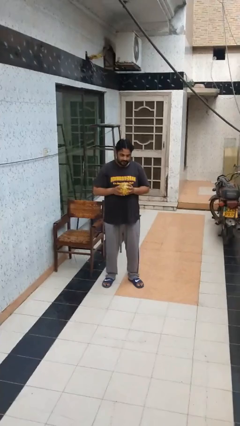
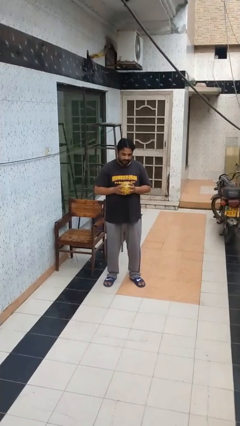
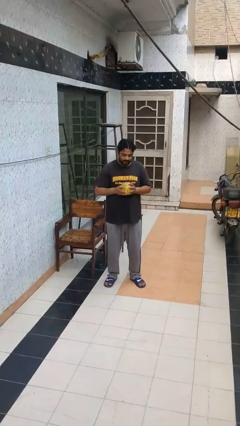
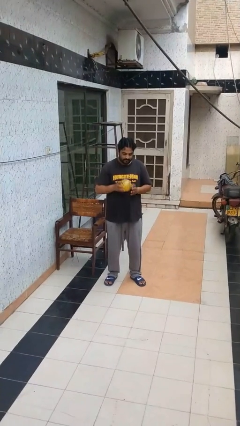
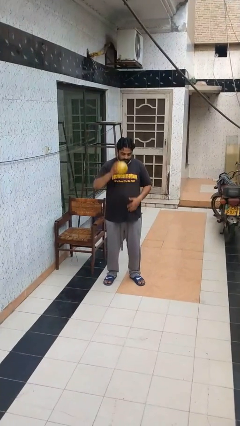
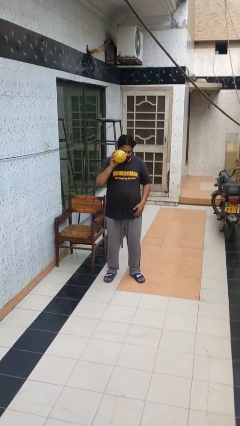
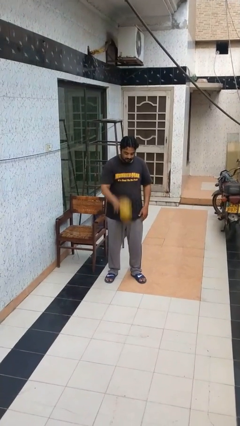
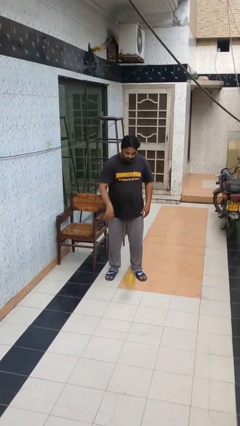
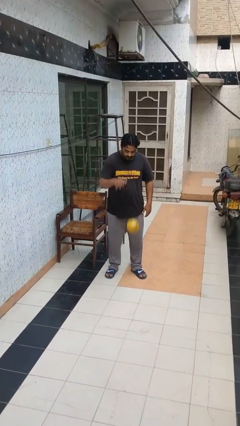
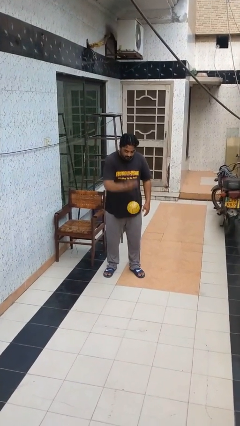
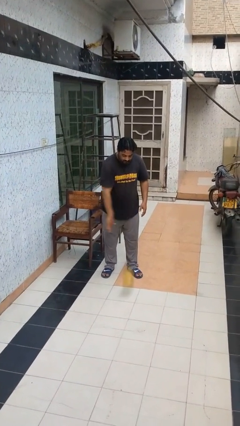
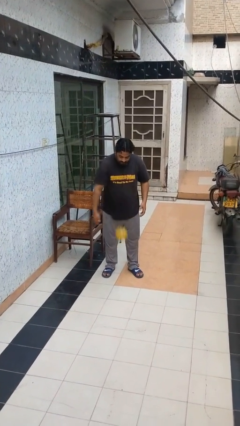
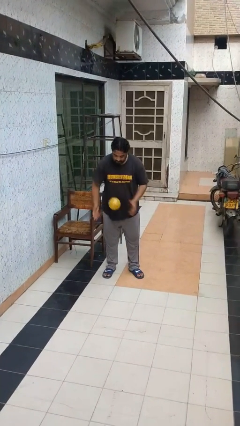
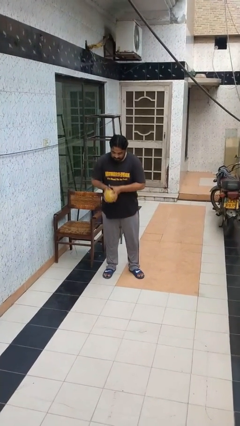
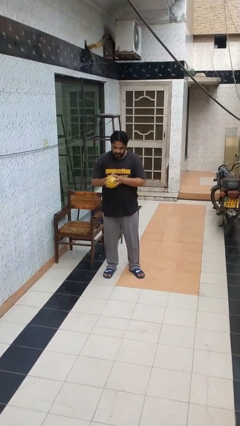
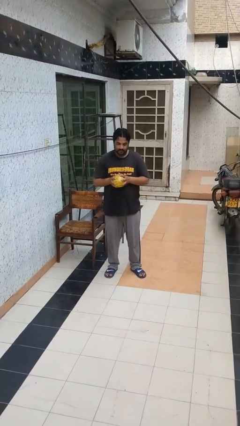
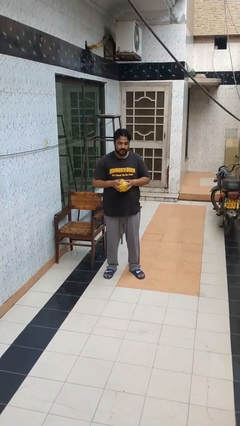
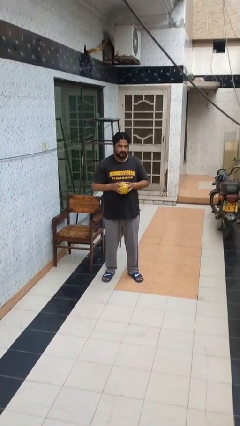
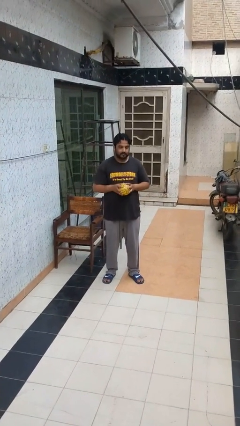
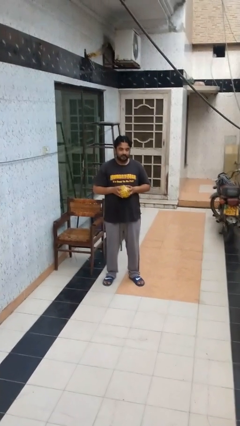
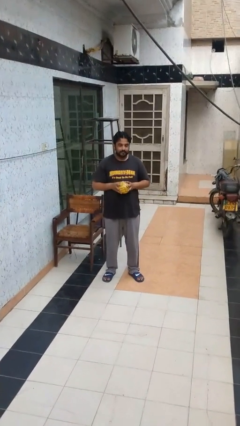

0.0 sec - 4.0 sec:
person bounces ball on floor

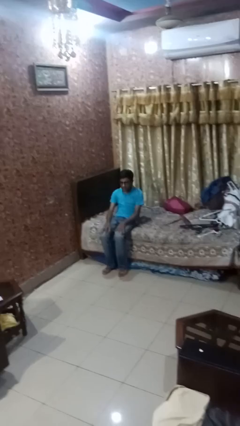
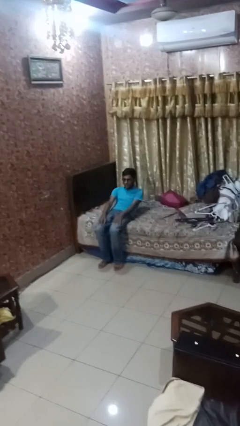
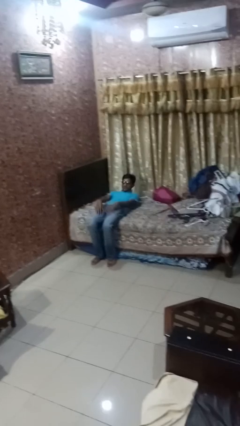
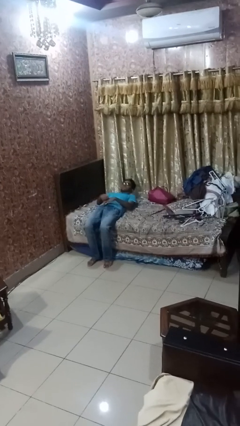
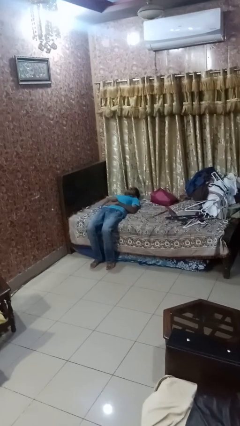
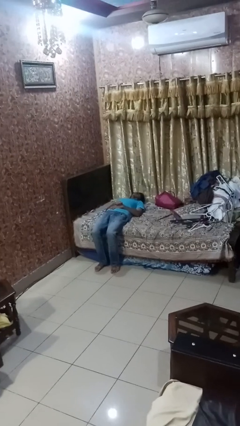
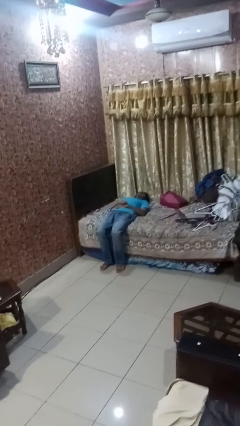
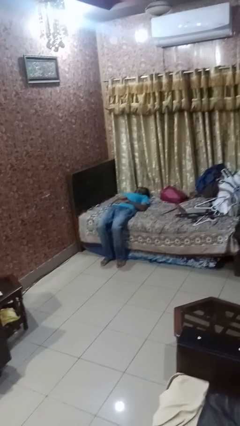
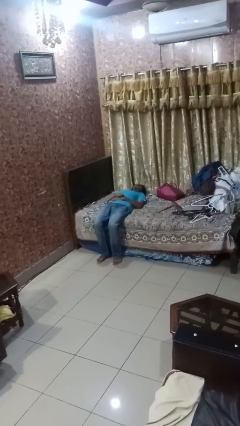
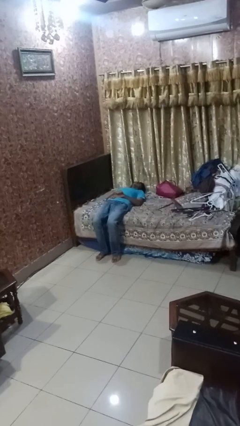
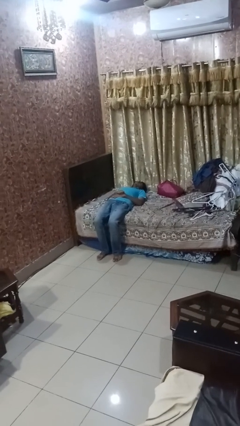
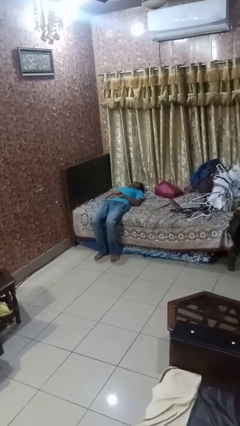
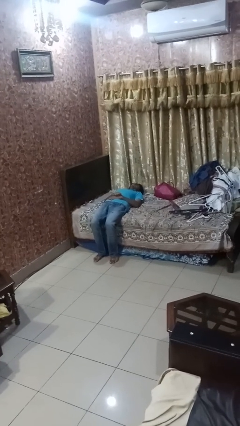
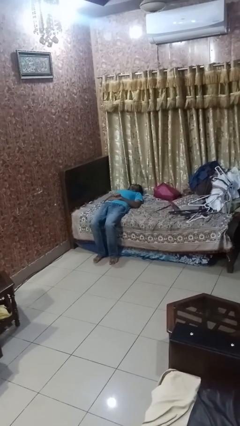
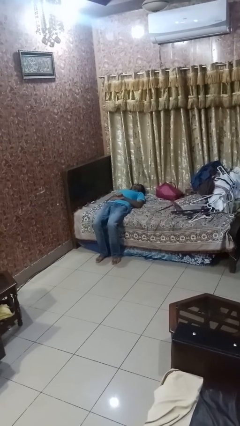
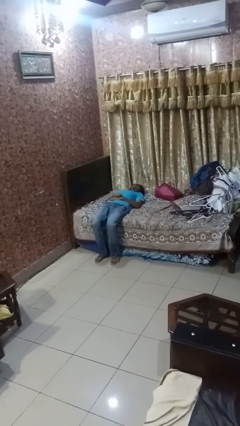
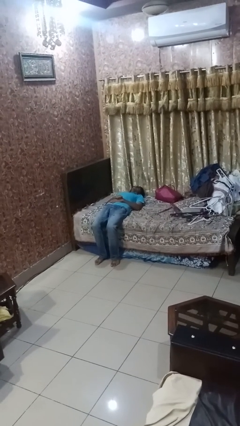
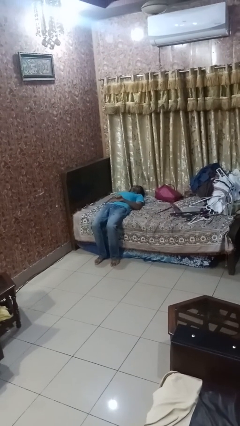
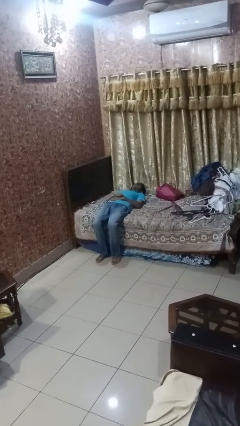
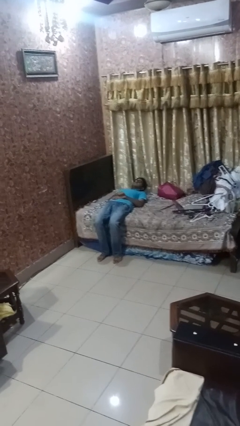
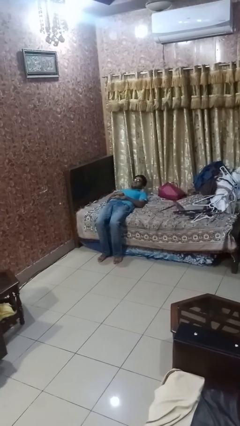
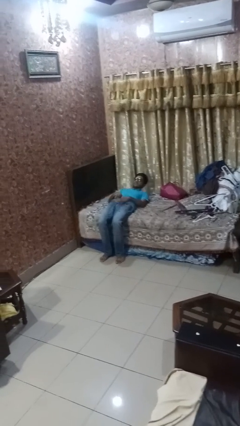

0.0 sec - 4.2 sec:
person lies down on bed

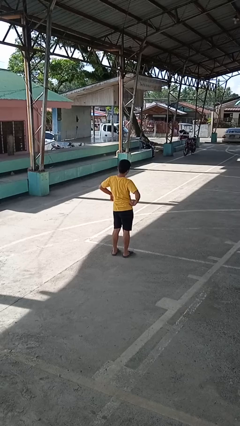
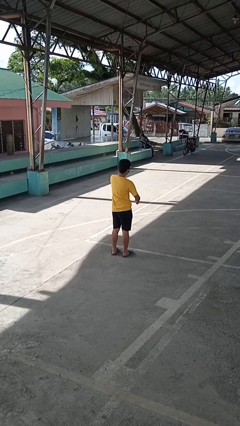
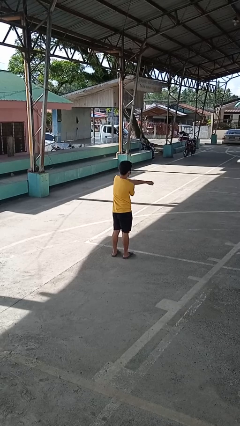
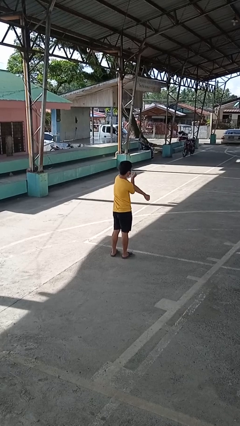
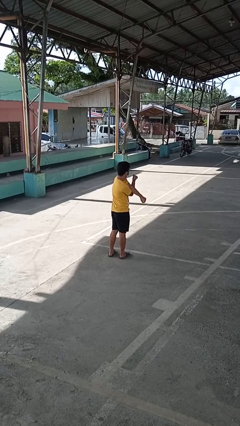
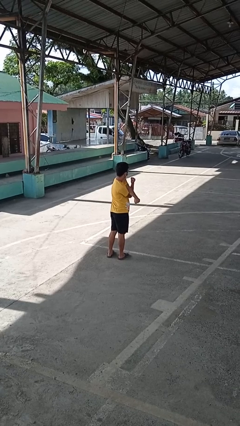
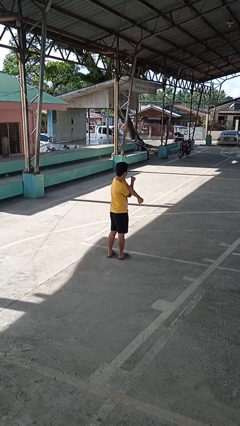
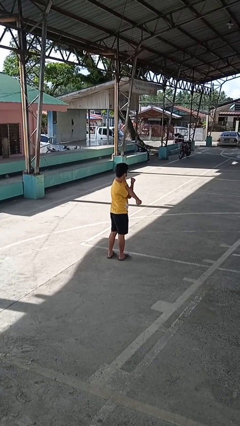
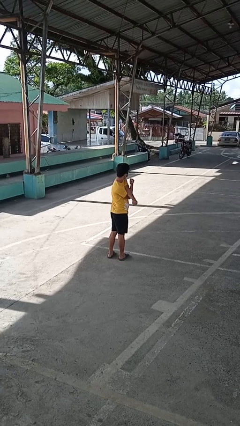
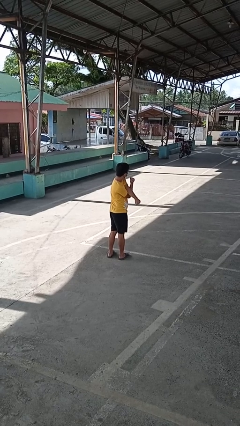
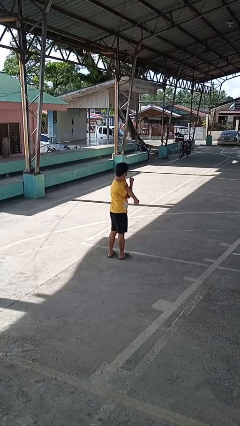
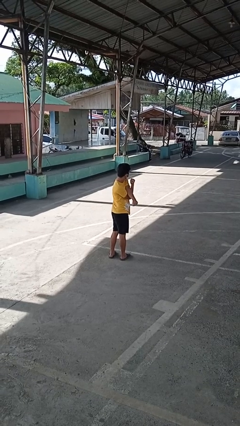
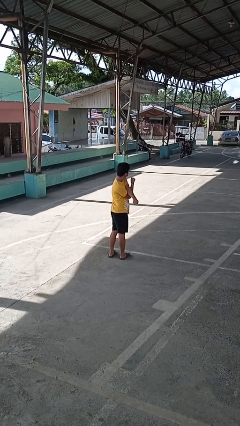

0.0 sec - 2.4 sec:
person stretches arms to side

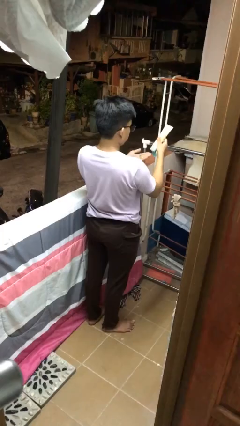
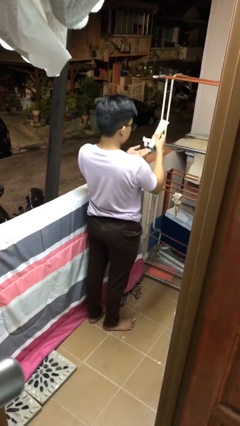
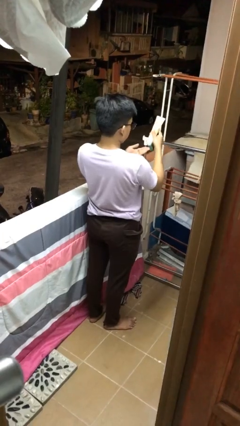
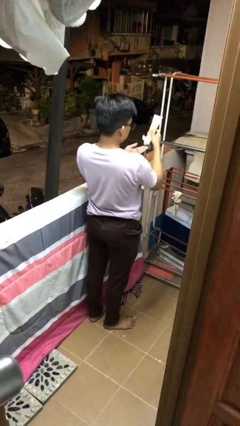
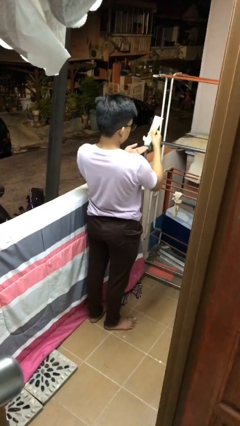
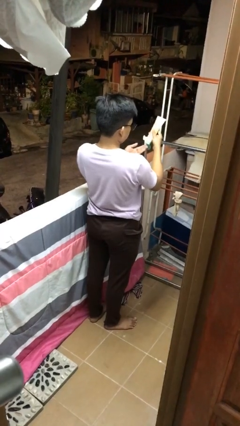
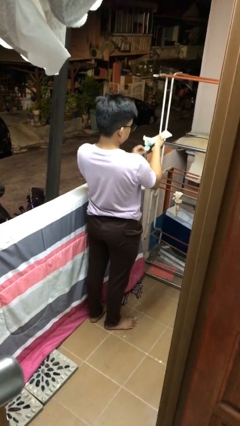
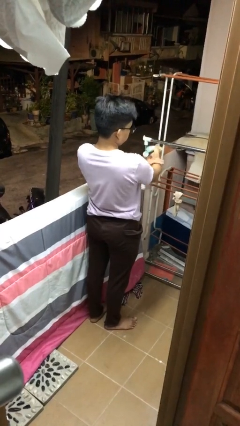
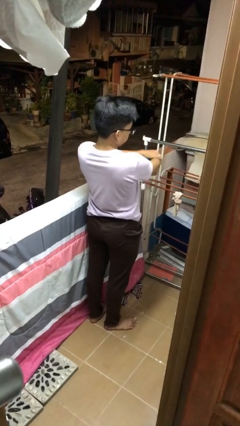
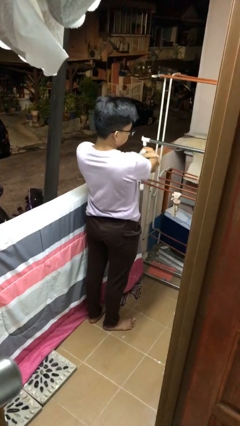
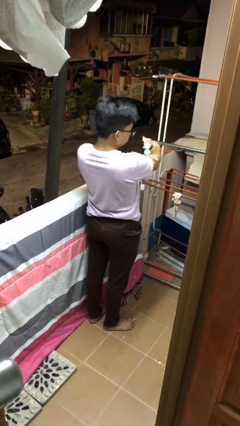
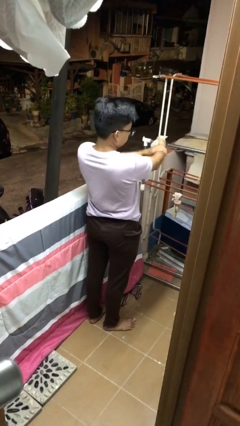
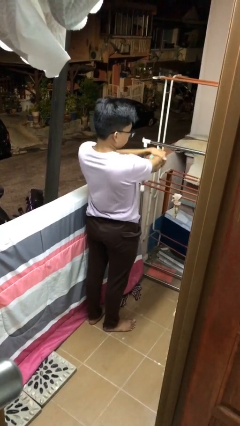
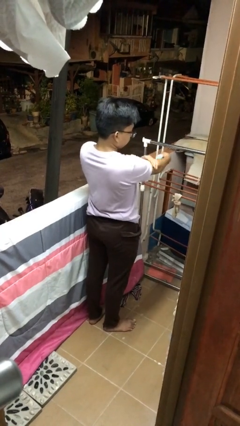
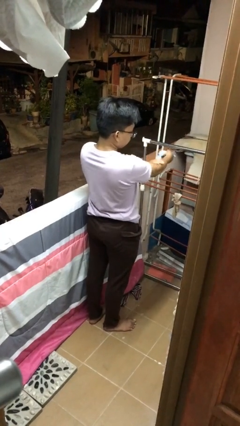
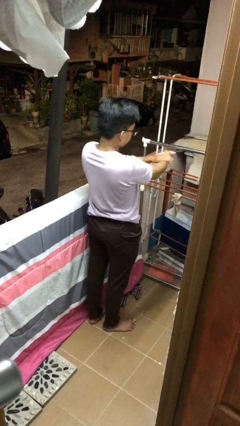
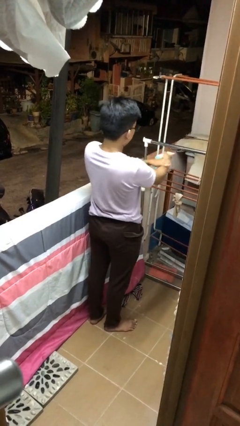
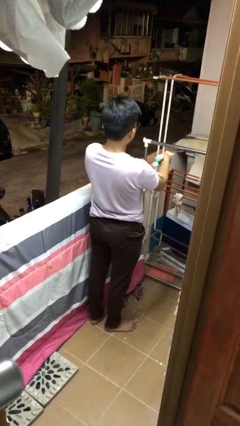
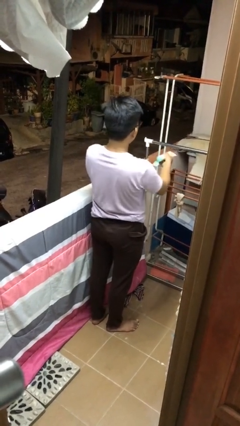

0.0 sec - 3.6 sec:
person applies sunscreen

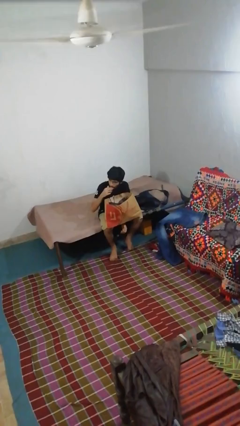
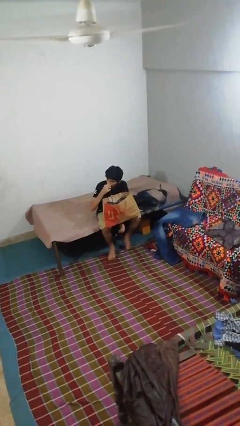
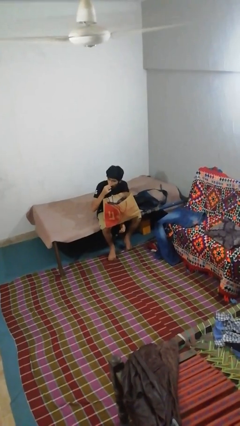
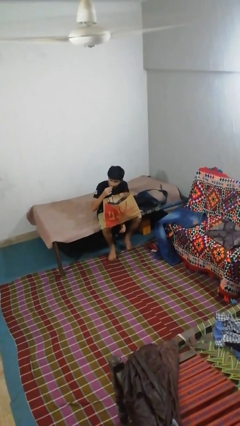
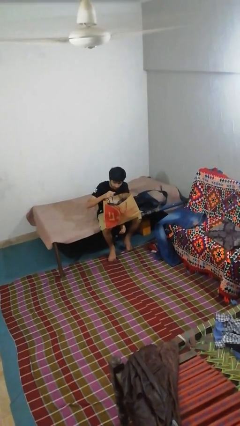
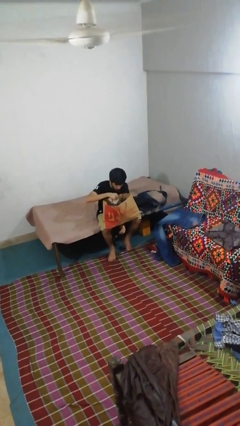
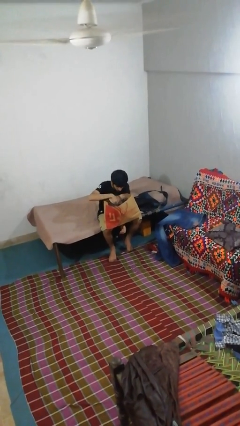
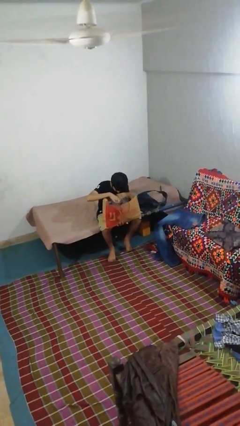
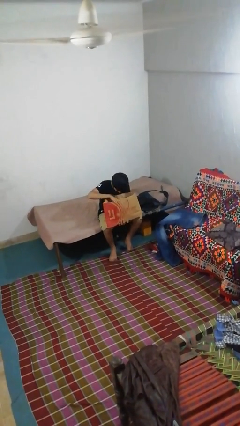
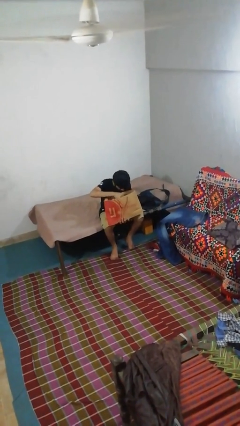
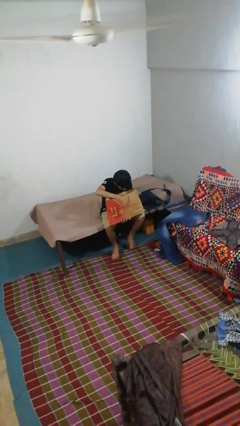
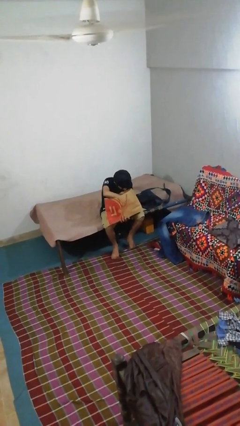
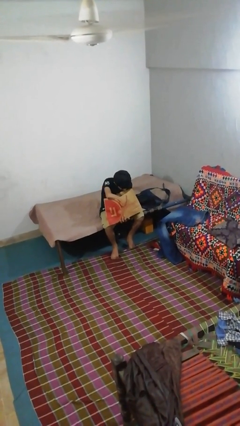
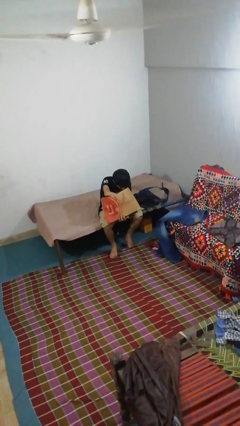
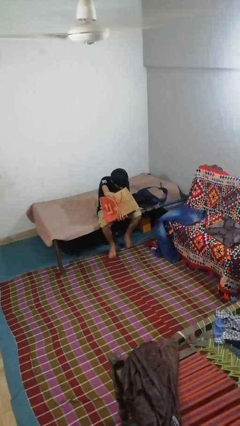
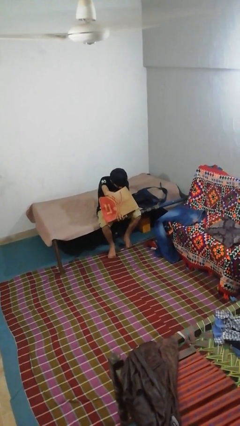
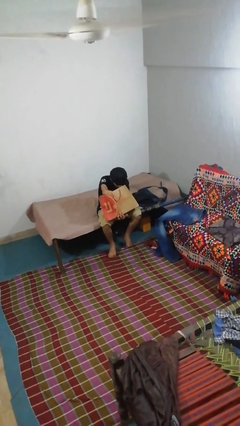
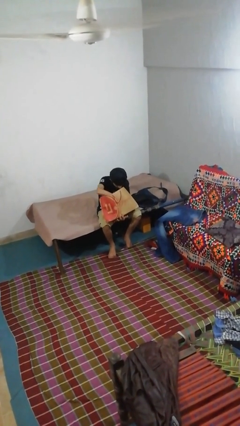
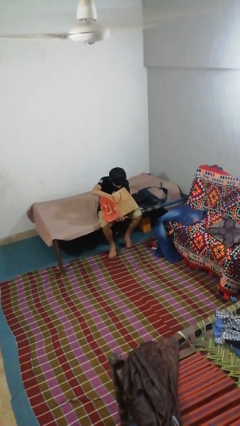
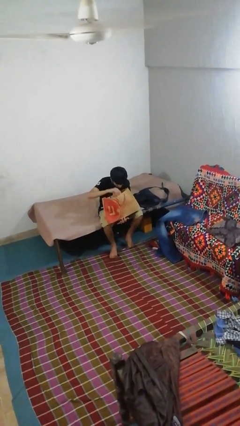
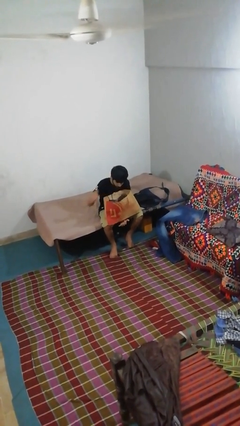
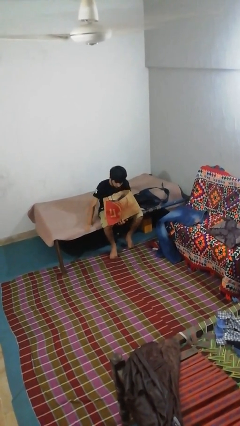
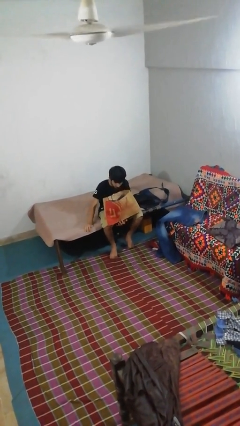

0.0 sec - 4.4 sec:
person searches in bag
